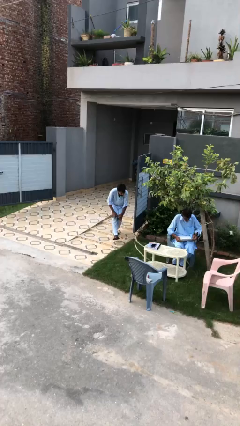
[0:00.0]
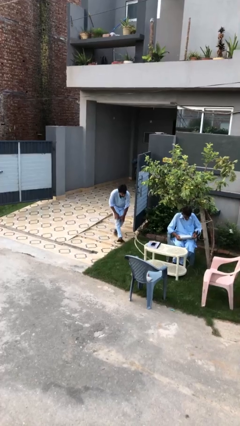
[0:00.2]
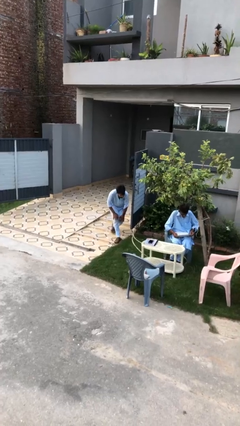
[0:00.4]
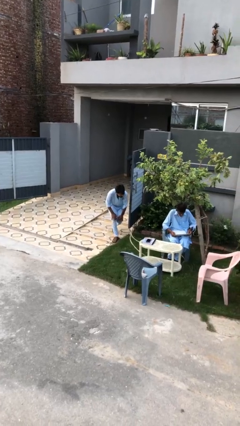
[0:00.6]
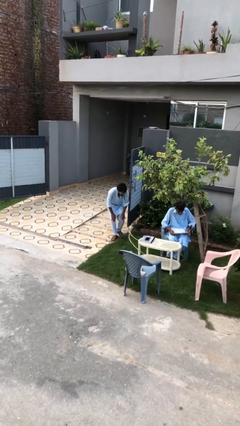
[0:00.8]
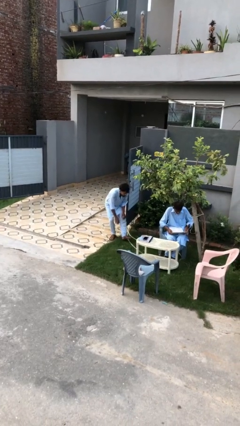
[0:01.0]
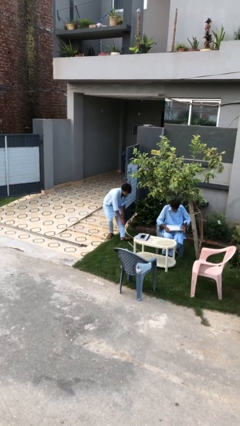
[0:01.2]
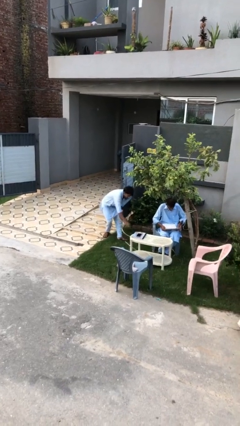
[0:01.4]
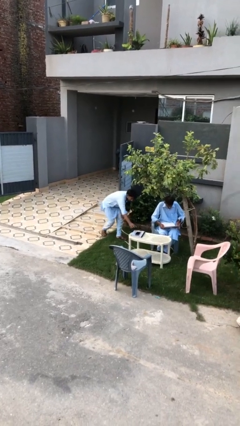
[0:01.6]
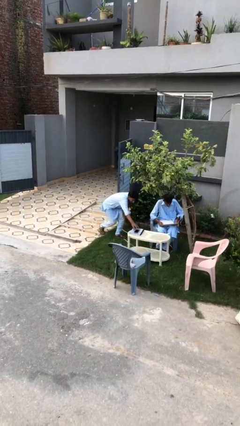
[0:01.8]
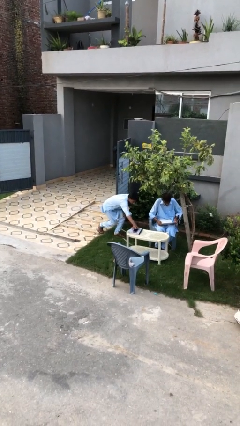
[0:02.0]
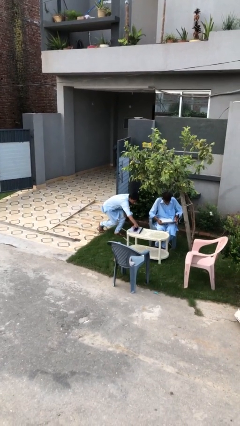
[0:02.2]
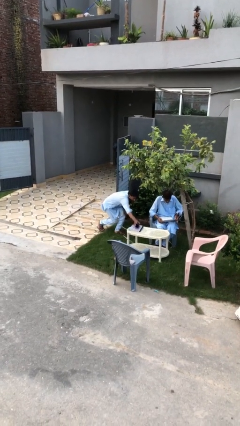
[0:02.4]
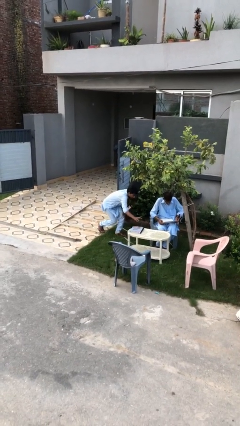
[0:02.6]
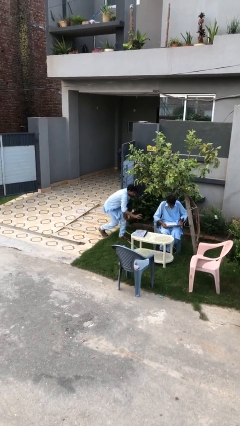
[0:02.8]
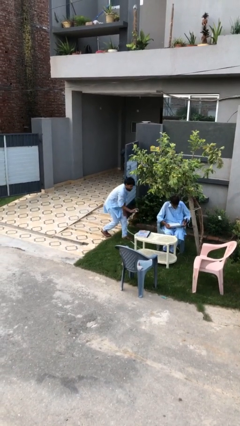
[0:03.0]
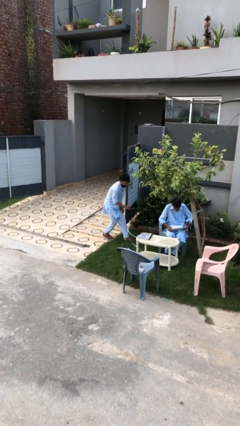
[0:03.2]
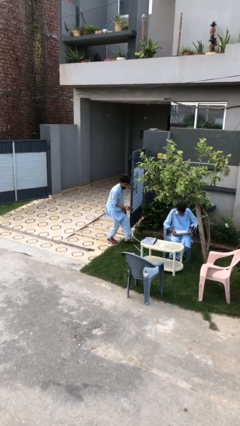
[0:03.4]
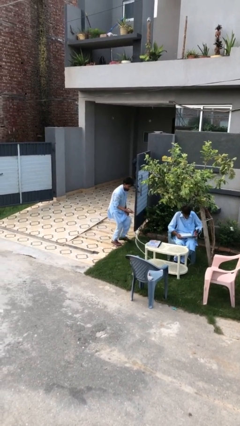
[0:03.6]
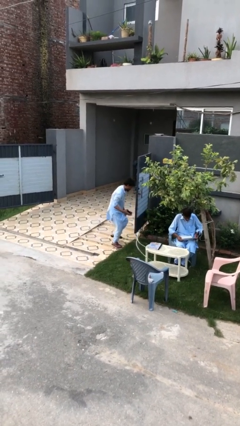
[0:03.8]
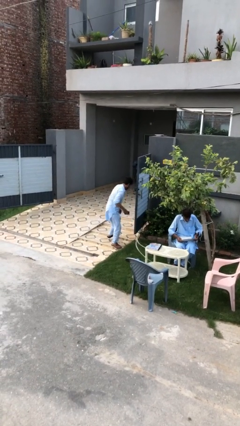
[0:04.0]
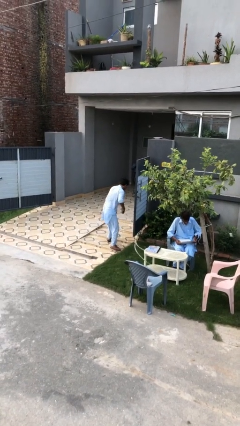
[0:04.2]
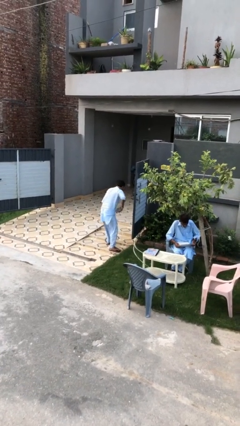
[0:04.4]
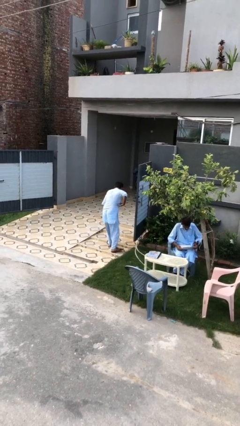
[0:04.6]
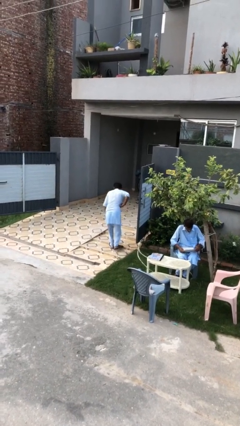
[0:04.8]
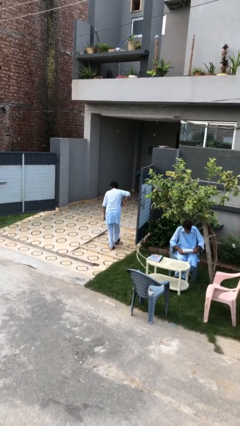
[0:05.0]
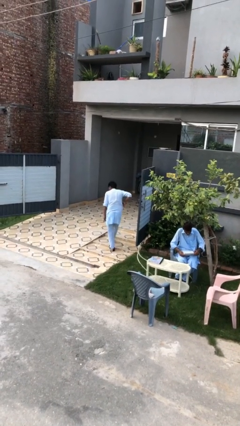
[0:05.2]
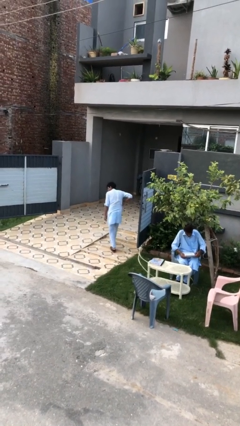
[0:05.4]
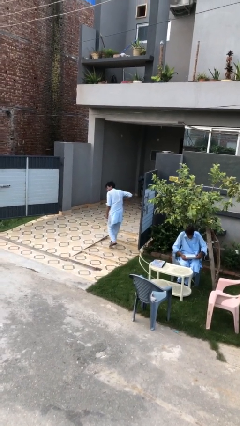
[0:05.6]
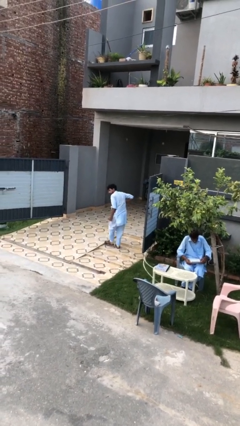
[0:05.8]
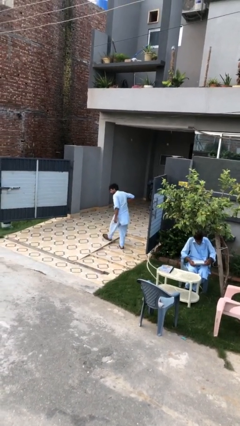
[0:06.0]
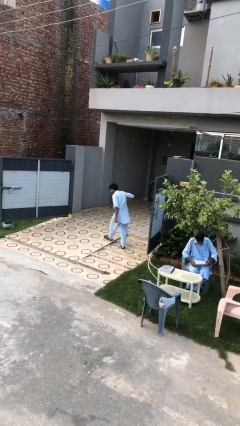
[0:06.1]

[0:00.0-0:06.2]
person steals object from person

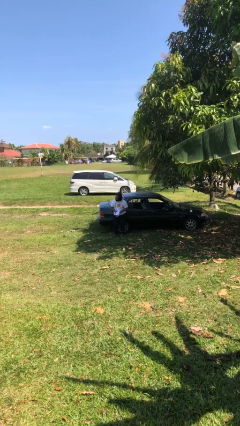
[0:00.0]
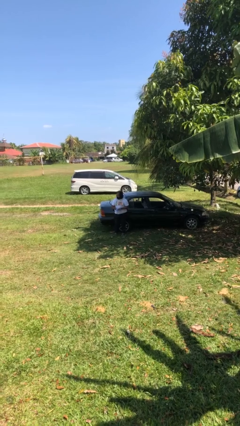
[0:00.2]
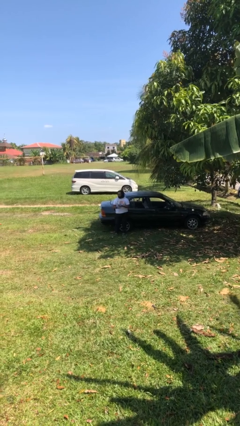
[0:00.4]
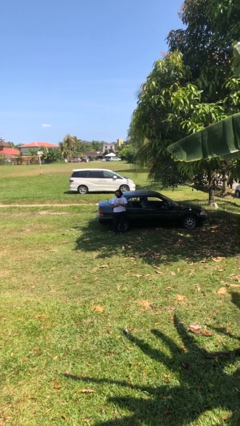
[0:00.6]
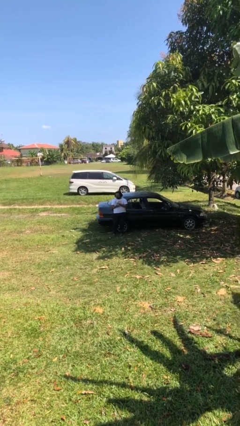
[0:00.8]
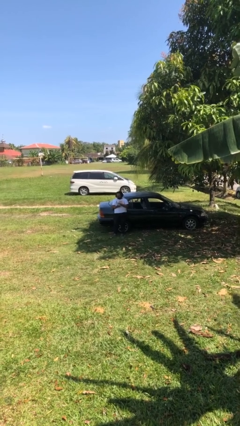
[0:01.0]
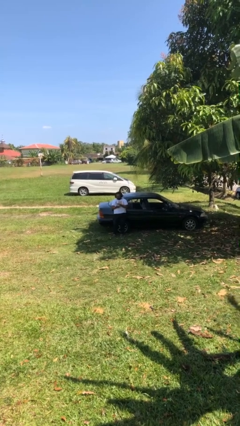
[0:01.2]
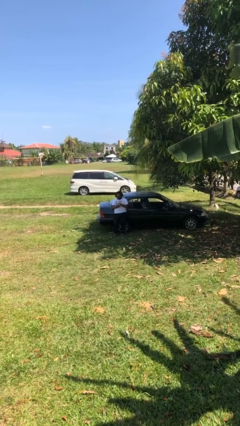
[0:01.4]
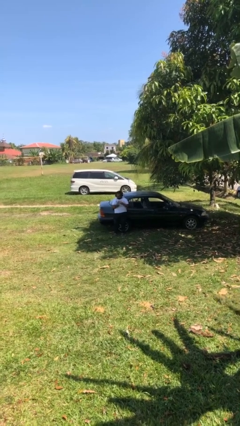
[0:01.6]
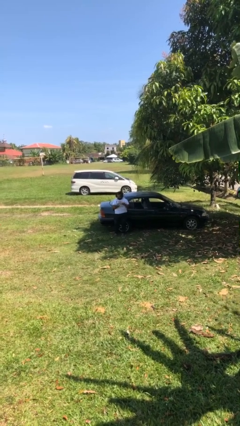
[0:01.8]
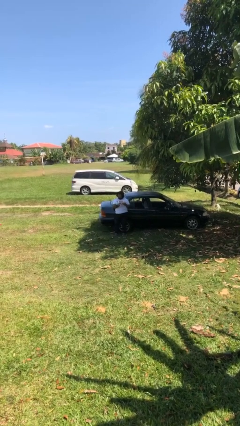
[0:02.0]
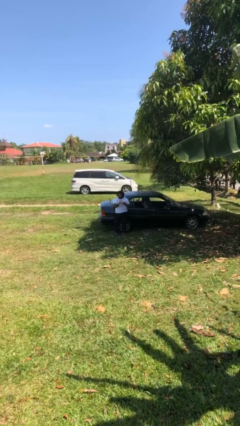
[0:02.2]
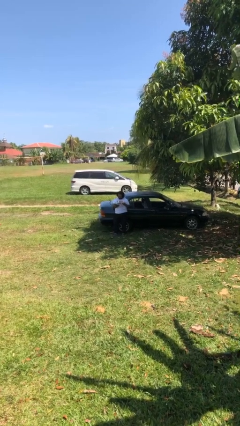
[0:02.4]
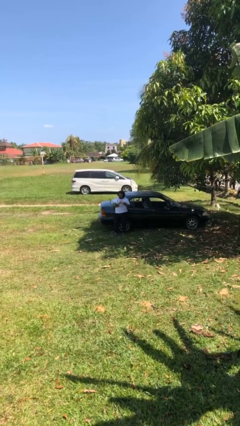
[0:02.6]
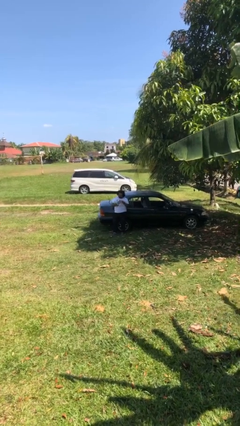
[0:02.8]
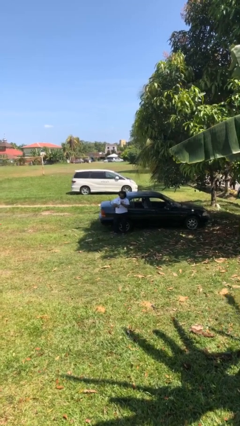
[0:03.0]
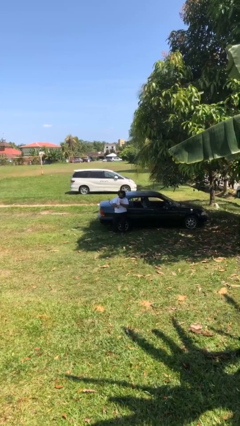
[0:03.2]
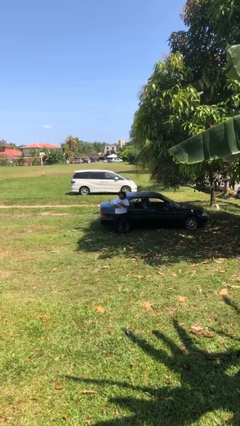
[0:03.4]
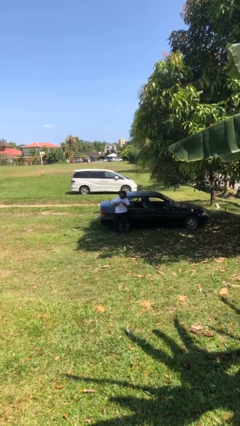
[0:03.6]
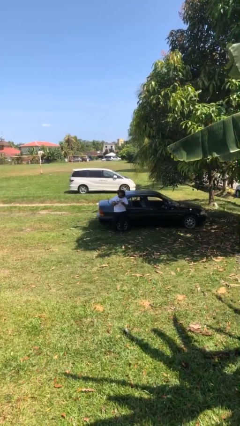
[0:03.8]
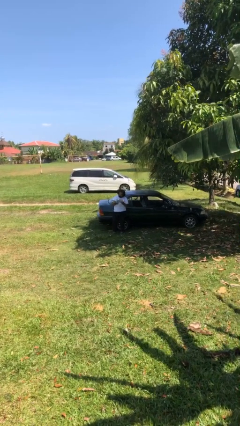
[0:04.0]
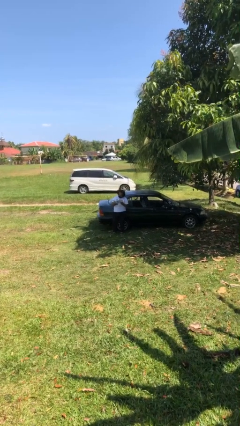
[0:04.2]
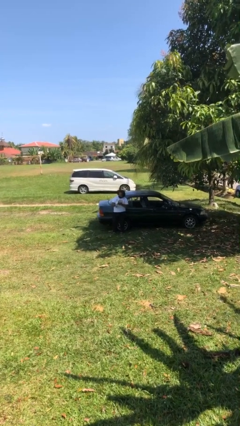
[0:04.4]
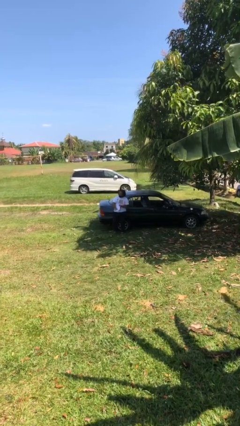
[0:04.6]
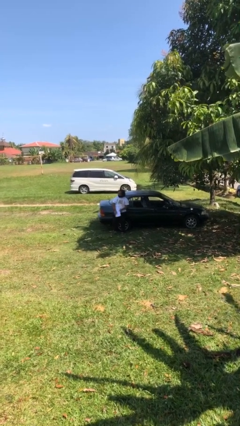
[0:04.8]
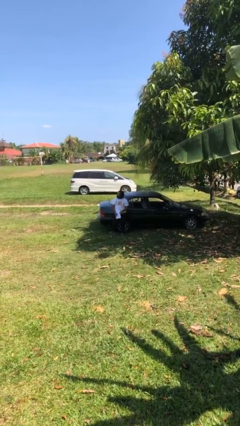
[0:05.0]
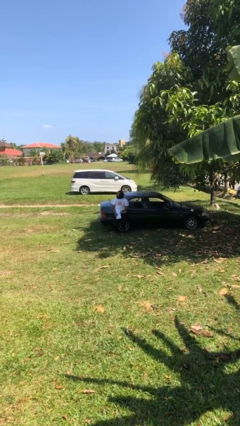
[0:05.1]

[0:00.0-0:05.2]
person reads document

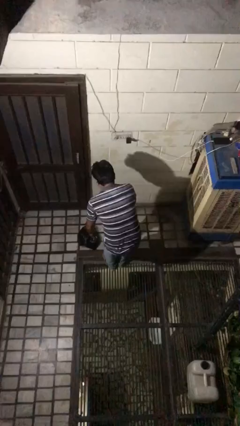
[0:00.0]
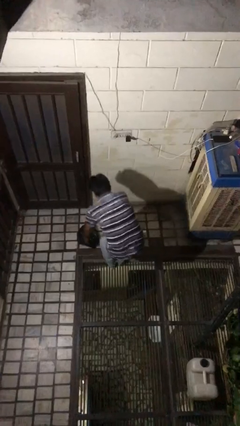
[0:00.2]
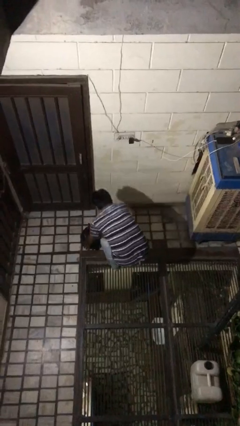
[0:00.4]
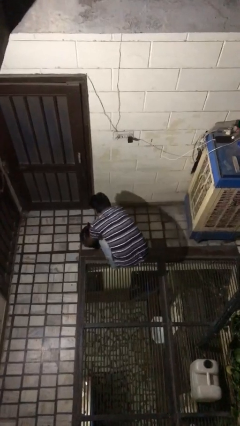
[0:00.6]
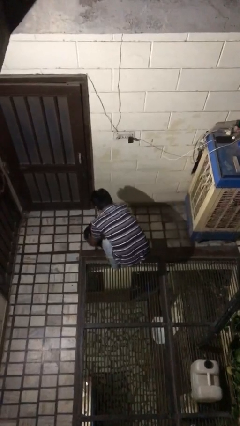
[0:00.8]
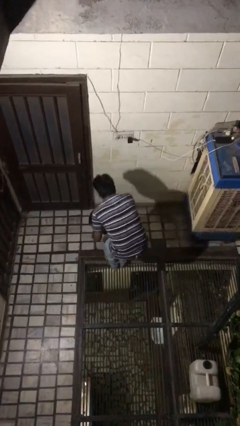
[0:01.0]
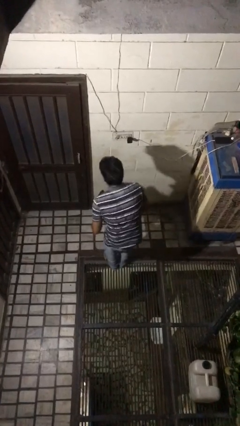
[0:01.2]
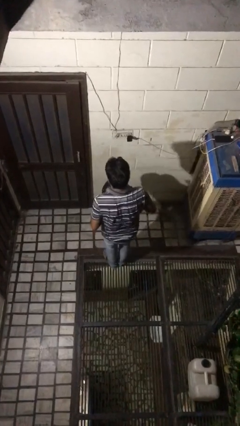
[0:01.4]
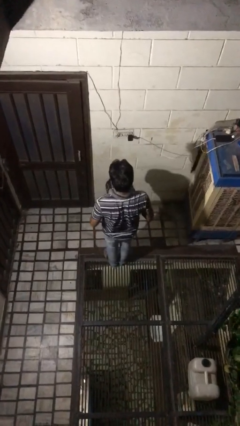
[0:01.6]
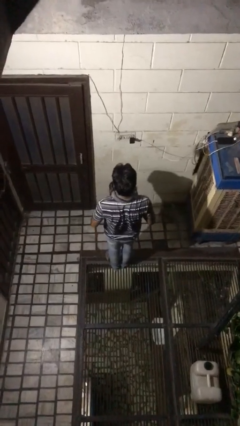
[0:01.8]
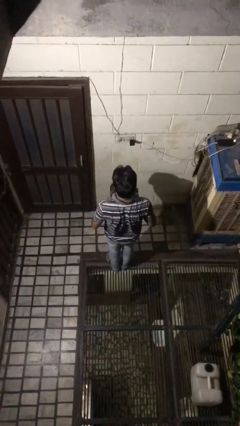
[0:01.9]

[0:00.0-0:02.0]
person picks up object from floor

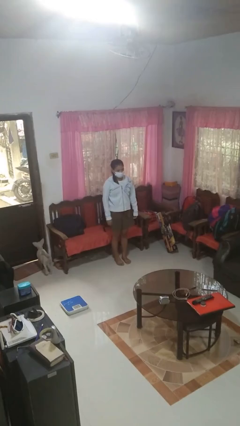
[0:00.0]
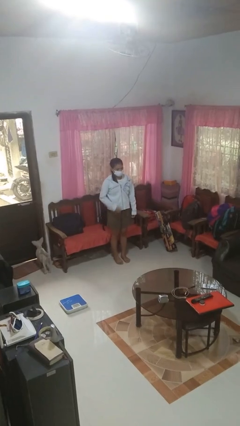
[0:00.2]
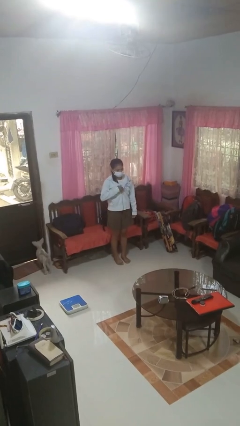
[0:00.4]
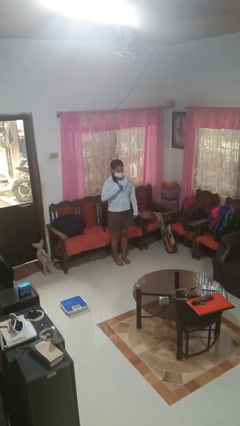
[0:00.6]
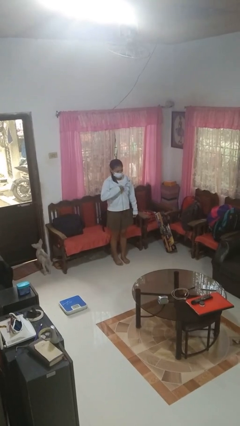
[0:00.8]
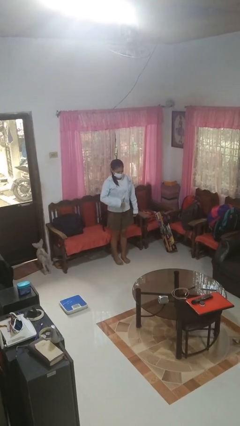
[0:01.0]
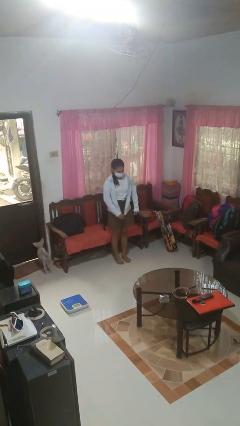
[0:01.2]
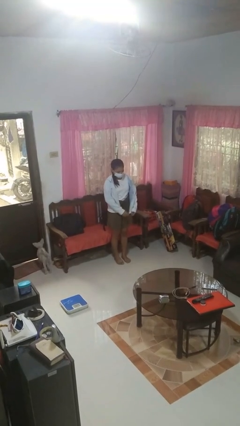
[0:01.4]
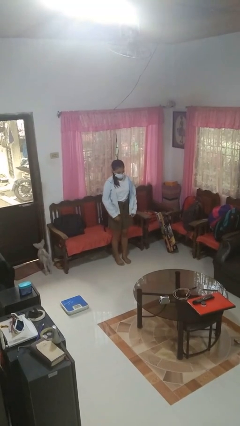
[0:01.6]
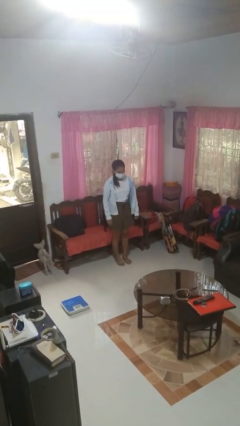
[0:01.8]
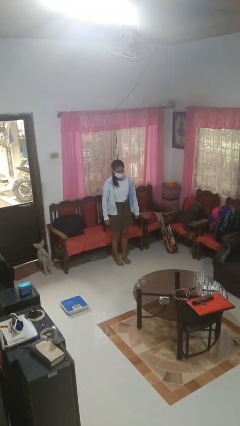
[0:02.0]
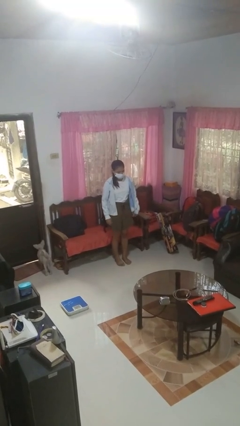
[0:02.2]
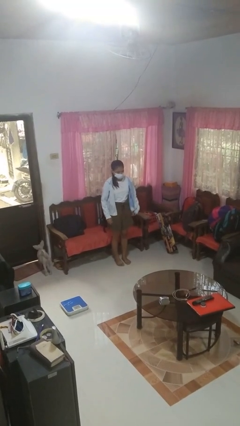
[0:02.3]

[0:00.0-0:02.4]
person unzips jacket

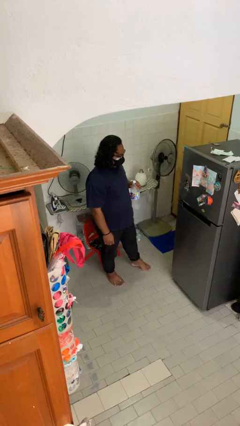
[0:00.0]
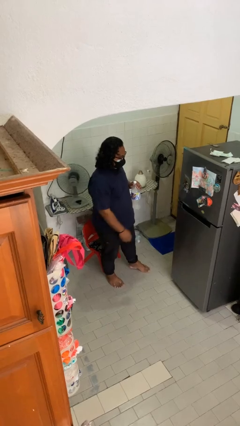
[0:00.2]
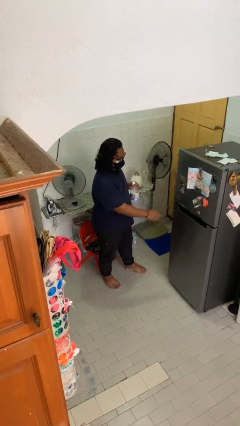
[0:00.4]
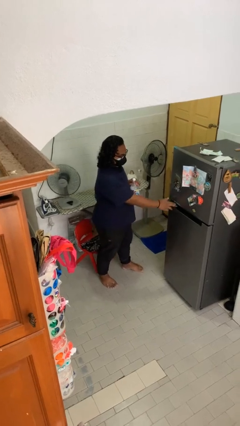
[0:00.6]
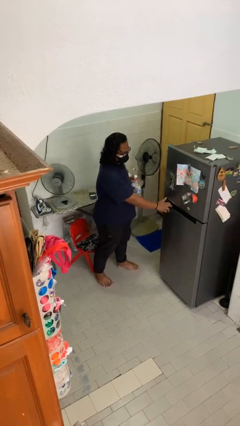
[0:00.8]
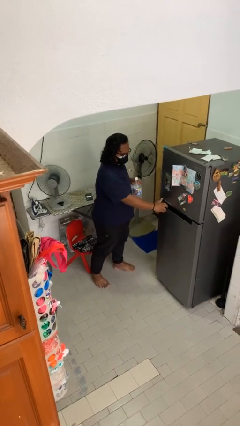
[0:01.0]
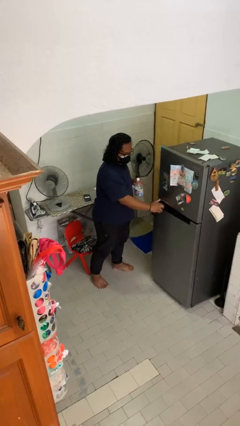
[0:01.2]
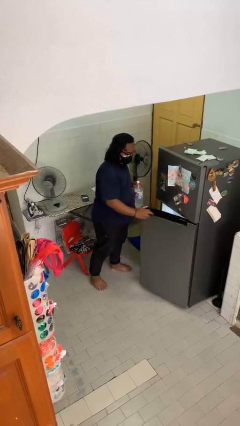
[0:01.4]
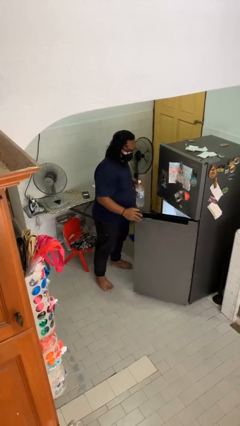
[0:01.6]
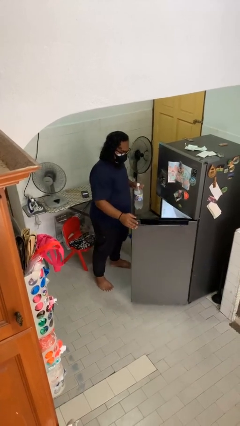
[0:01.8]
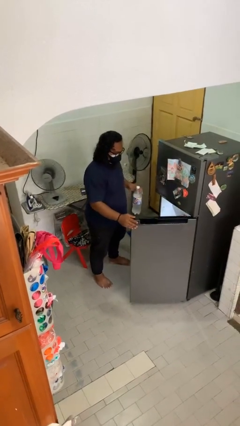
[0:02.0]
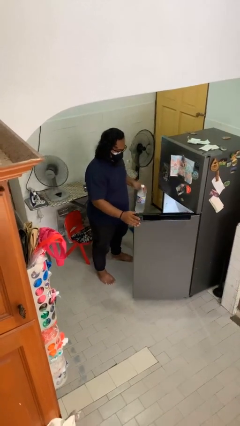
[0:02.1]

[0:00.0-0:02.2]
person opens refrigerator
